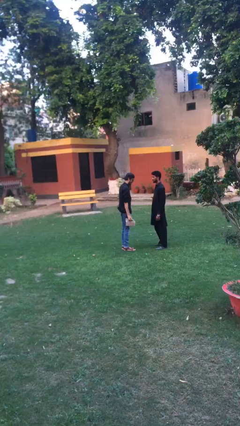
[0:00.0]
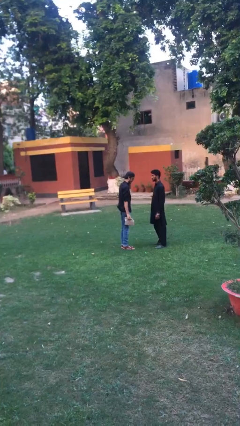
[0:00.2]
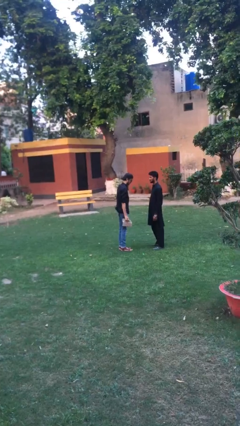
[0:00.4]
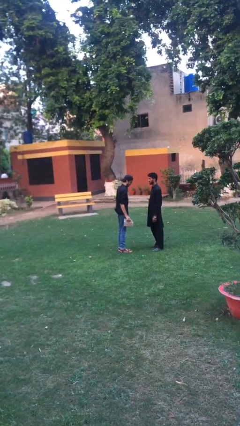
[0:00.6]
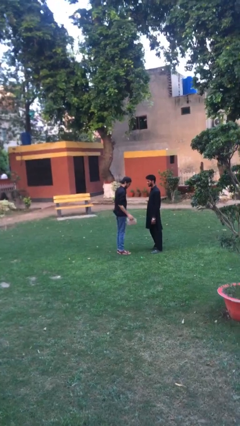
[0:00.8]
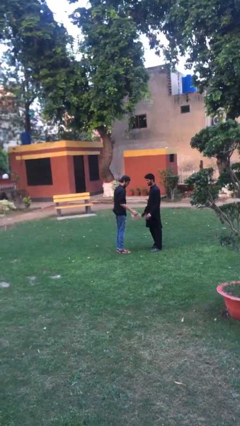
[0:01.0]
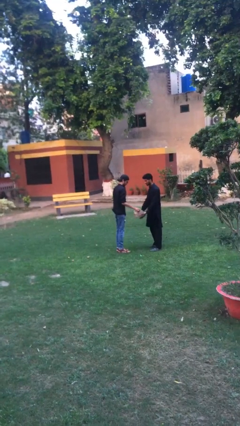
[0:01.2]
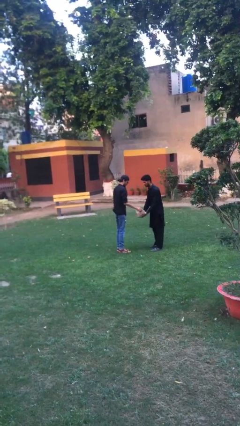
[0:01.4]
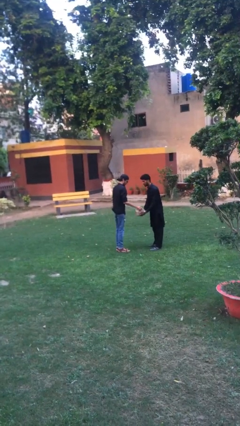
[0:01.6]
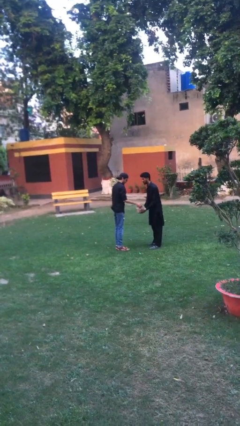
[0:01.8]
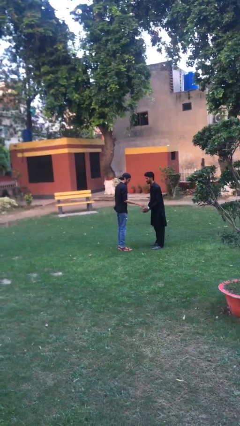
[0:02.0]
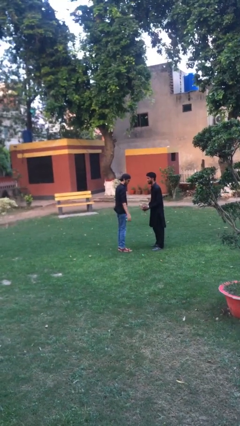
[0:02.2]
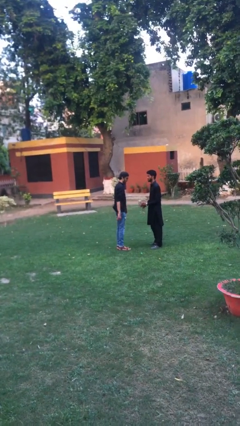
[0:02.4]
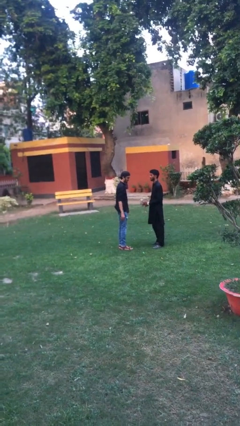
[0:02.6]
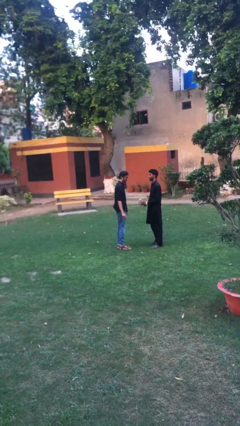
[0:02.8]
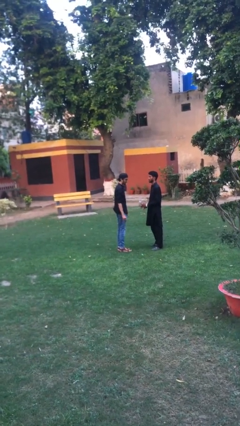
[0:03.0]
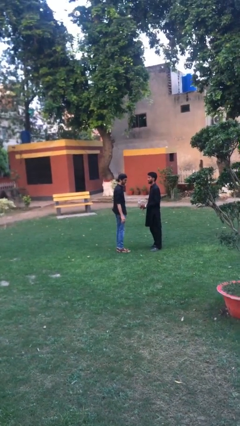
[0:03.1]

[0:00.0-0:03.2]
person transfers object to person

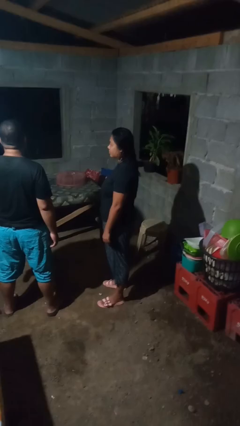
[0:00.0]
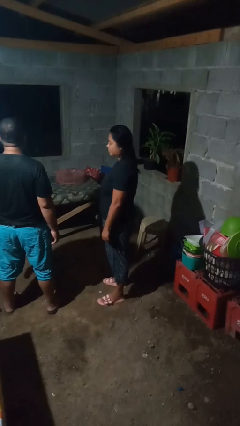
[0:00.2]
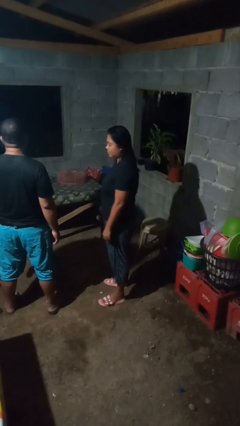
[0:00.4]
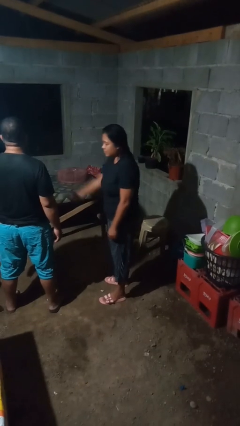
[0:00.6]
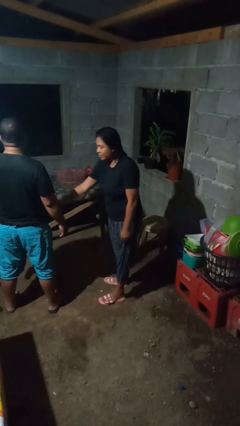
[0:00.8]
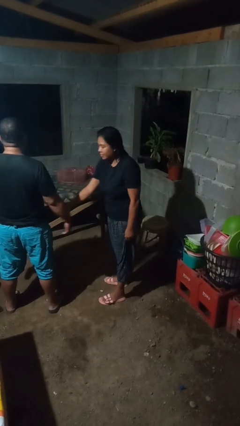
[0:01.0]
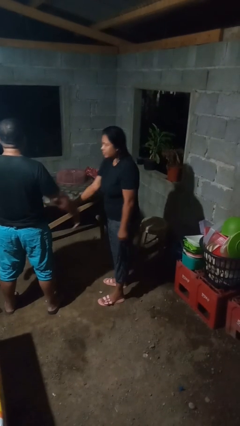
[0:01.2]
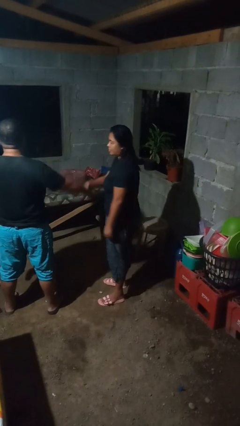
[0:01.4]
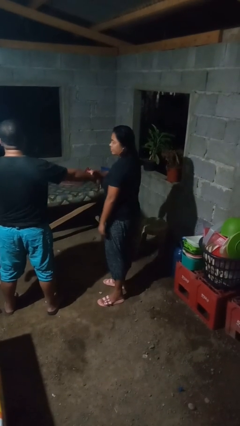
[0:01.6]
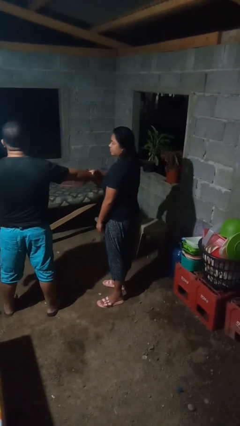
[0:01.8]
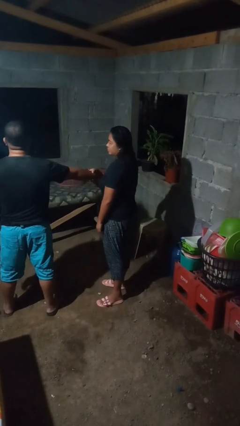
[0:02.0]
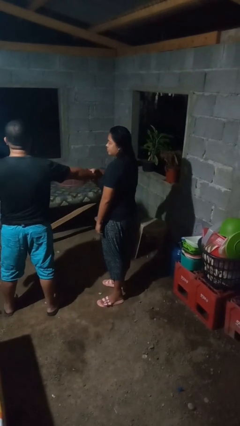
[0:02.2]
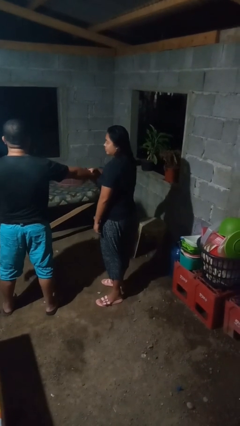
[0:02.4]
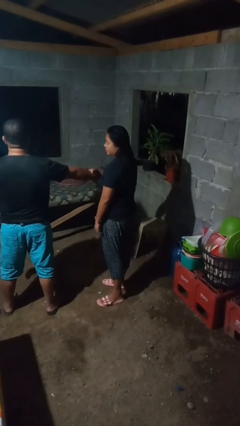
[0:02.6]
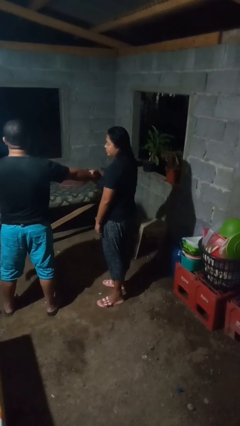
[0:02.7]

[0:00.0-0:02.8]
person grabs person by forearm

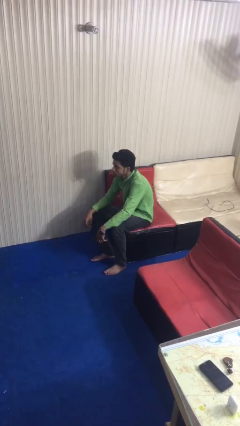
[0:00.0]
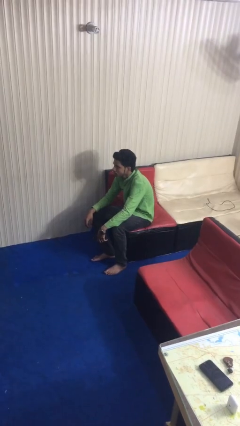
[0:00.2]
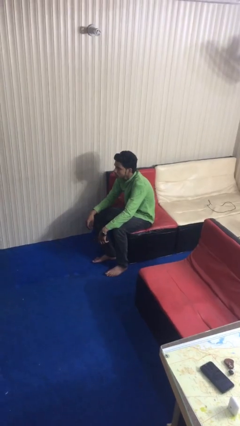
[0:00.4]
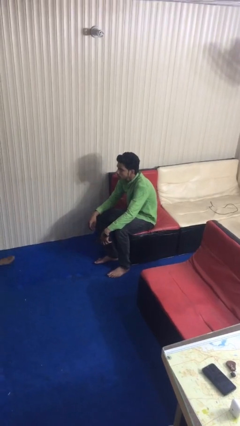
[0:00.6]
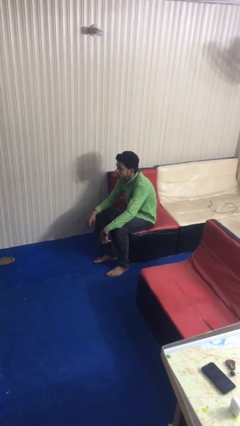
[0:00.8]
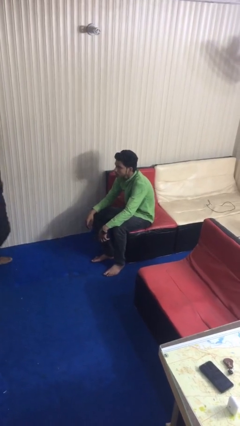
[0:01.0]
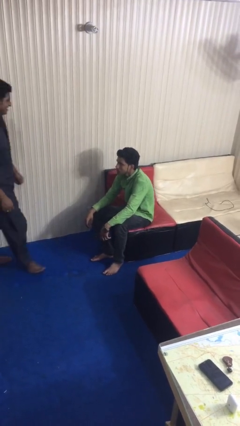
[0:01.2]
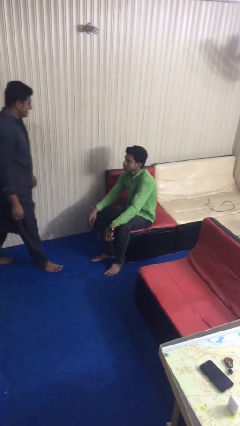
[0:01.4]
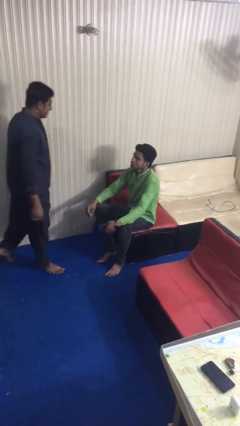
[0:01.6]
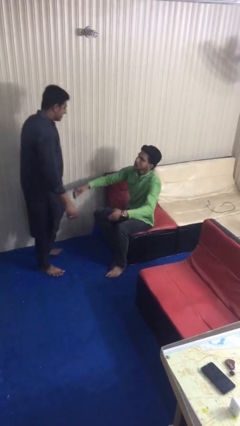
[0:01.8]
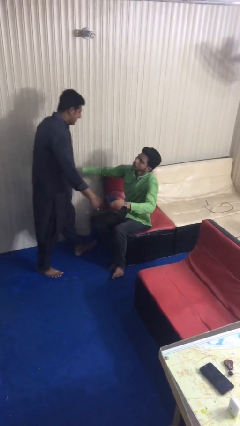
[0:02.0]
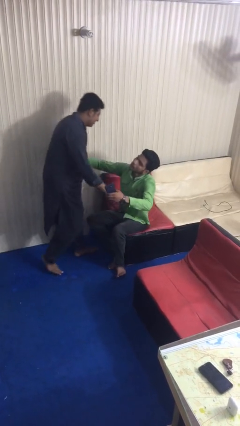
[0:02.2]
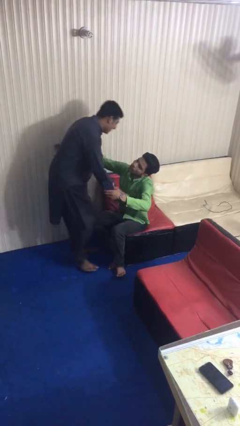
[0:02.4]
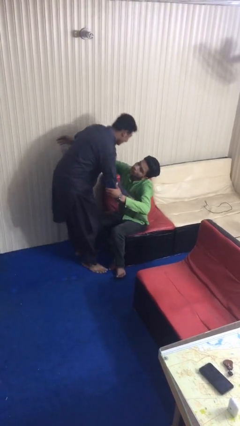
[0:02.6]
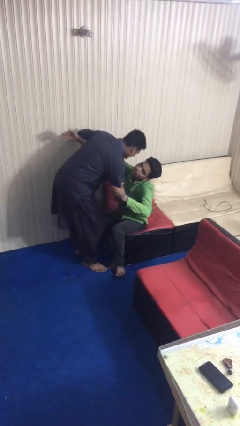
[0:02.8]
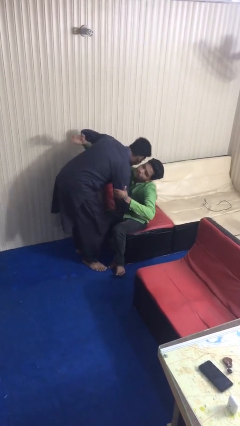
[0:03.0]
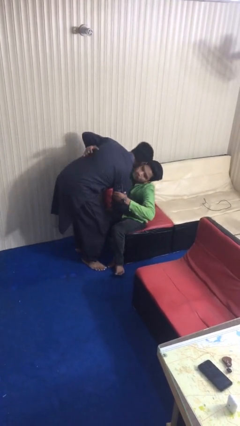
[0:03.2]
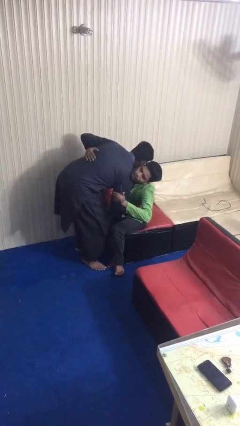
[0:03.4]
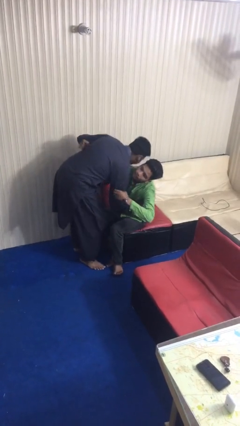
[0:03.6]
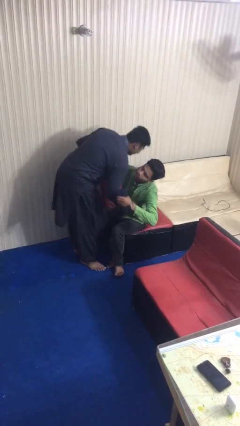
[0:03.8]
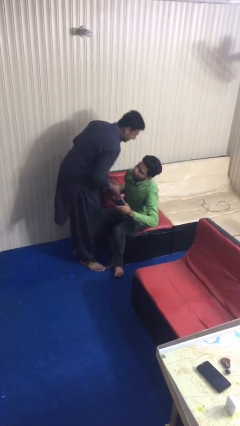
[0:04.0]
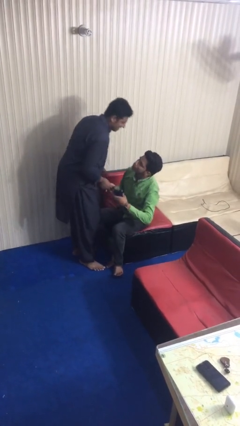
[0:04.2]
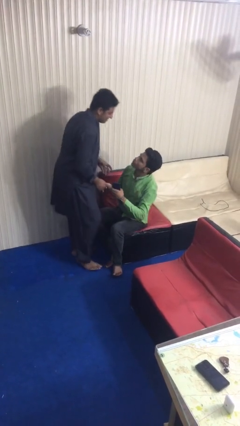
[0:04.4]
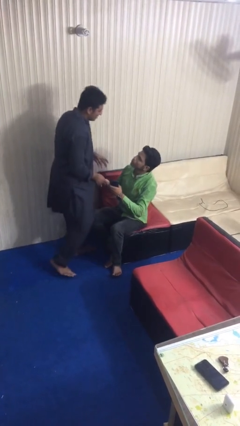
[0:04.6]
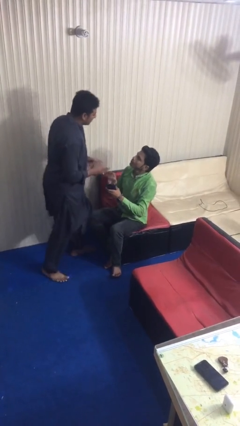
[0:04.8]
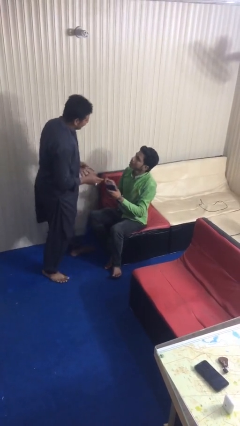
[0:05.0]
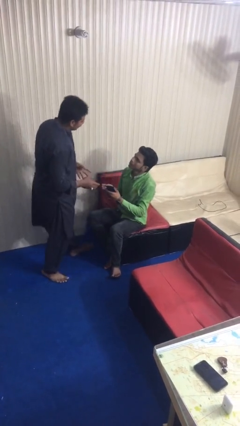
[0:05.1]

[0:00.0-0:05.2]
person embraces person

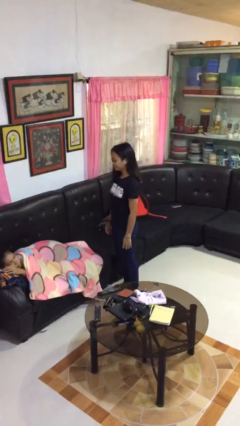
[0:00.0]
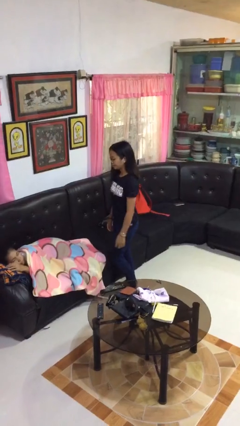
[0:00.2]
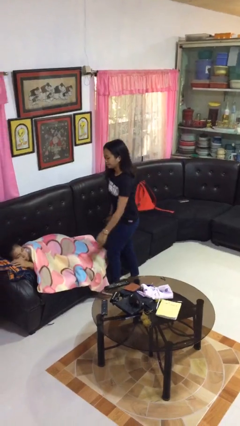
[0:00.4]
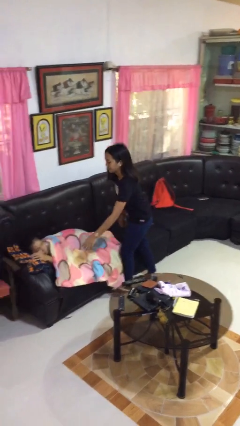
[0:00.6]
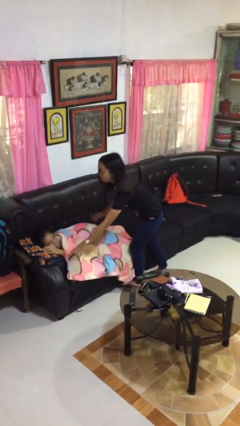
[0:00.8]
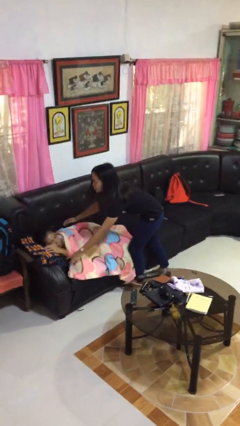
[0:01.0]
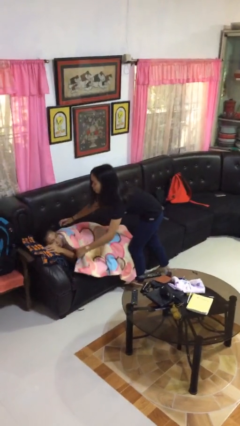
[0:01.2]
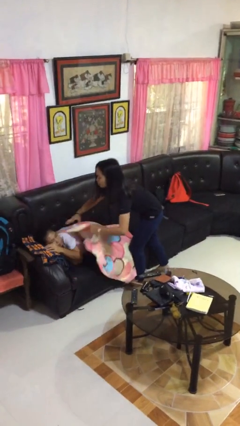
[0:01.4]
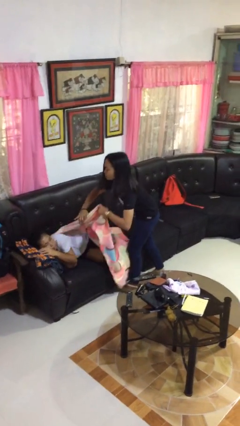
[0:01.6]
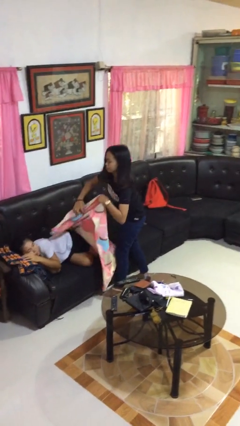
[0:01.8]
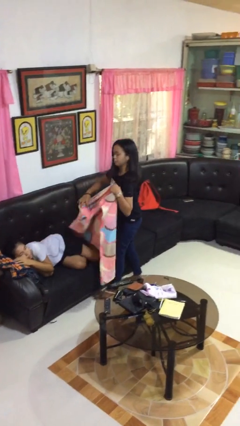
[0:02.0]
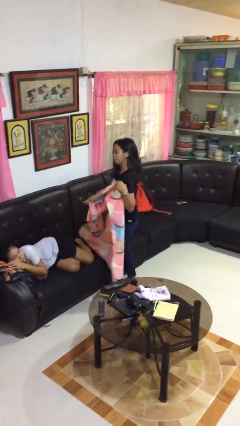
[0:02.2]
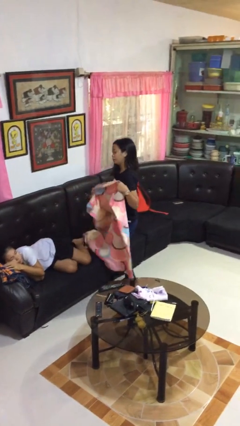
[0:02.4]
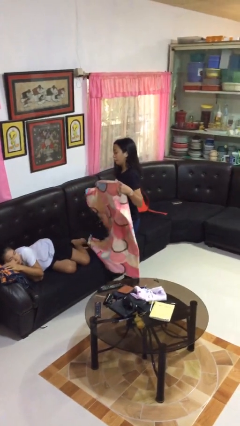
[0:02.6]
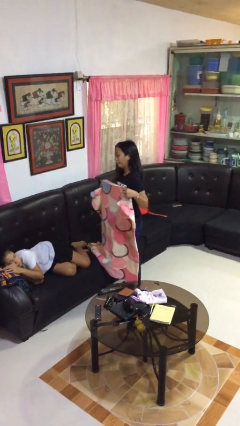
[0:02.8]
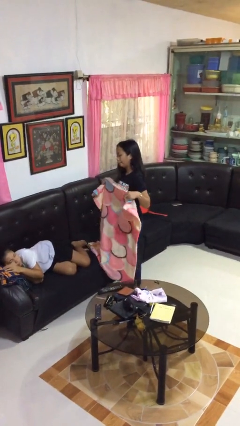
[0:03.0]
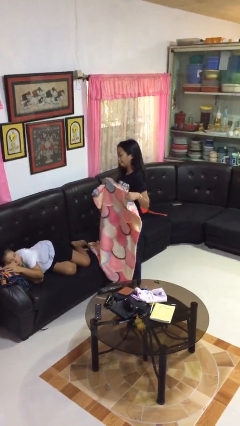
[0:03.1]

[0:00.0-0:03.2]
person uncovers friend with blanket

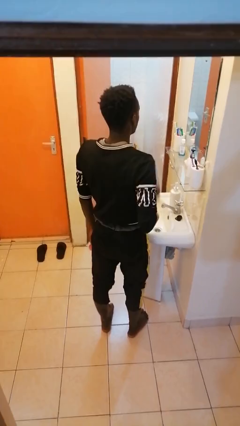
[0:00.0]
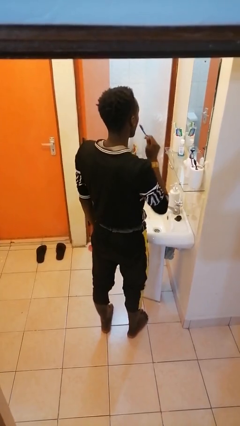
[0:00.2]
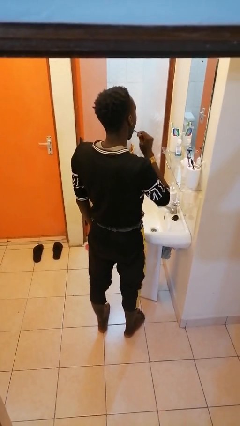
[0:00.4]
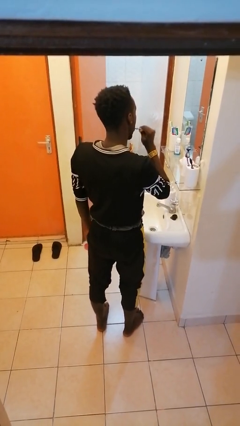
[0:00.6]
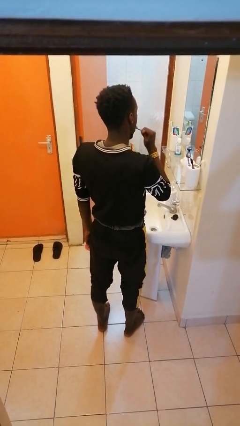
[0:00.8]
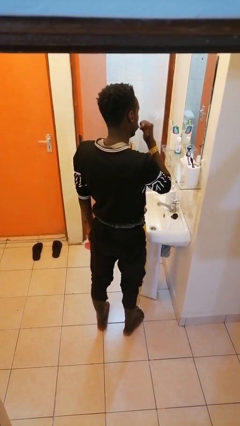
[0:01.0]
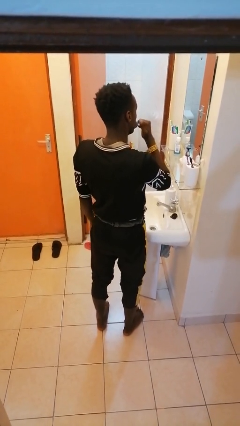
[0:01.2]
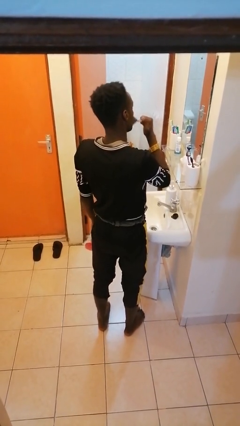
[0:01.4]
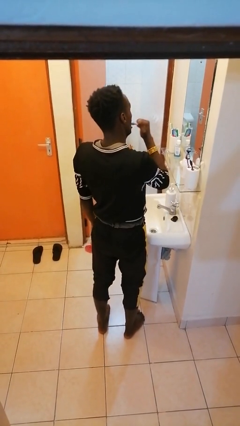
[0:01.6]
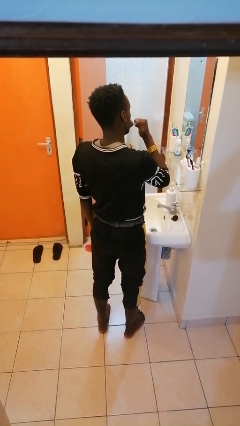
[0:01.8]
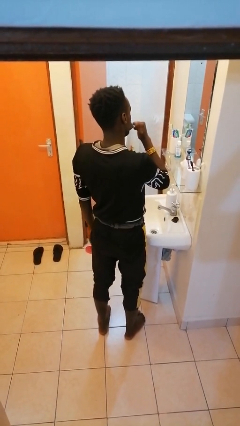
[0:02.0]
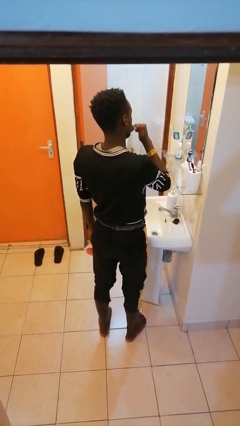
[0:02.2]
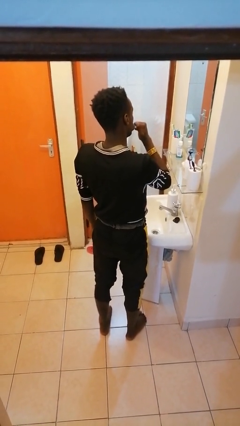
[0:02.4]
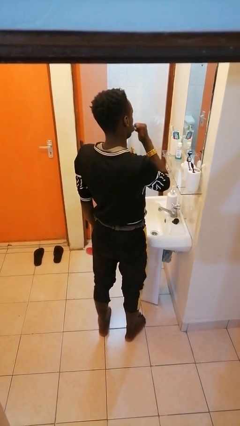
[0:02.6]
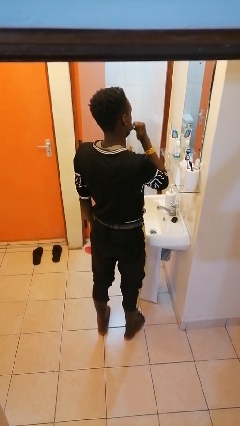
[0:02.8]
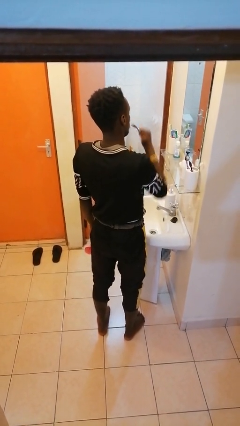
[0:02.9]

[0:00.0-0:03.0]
person brushes teeth
